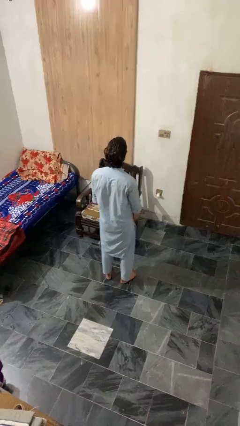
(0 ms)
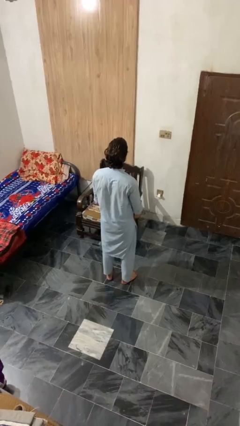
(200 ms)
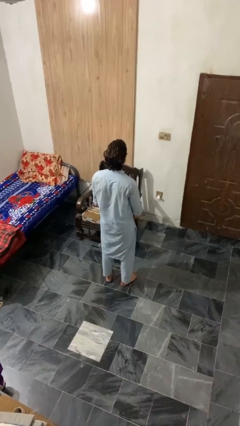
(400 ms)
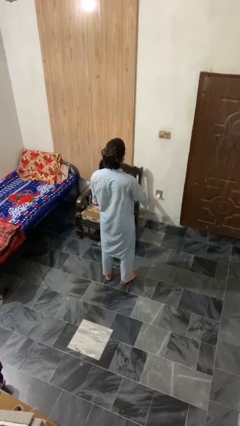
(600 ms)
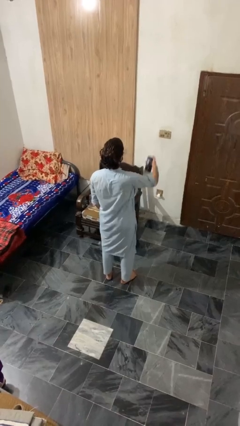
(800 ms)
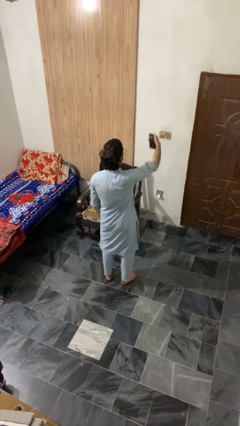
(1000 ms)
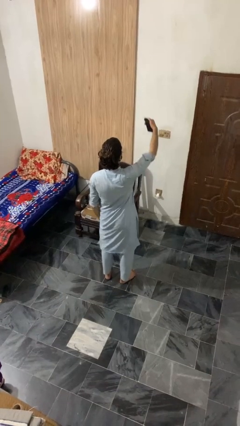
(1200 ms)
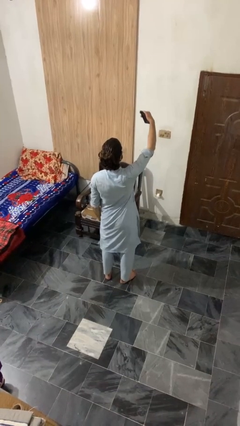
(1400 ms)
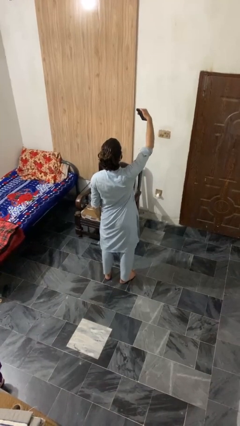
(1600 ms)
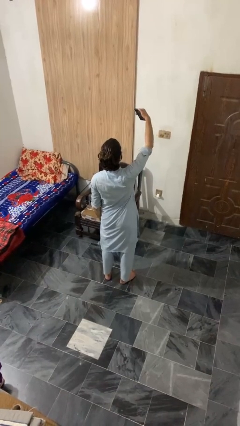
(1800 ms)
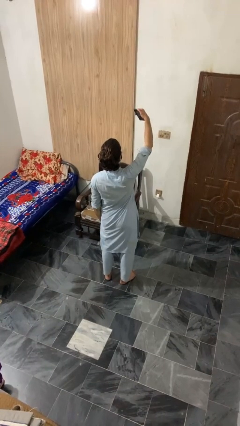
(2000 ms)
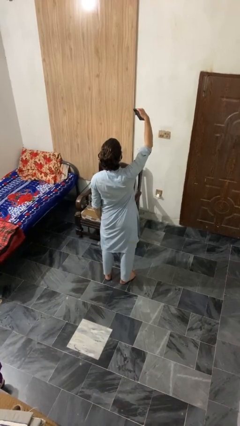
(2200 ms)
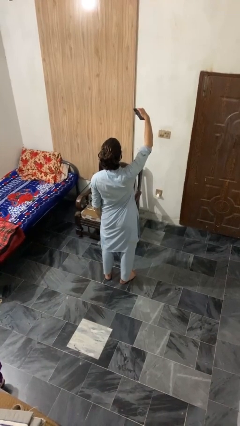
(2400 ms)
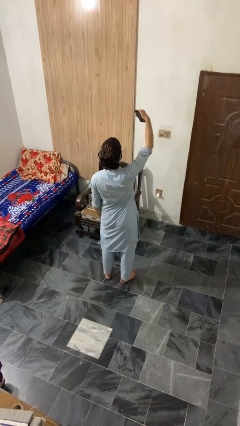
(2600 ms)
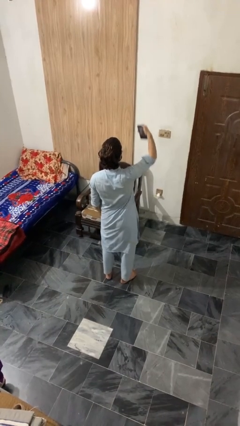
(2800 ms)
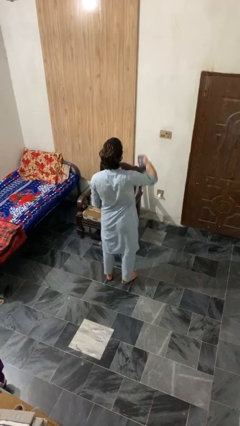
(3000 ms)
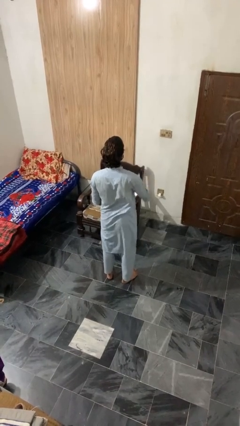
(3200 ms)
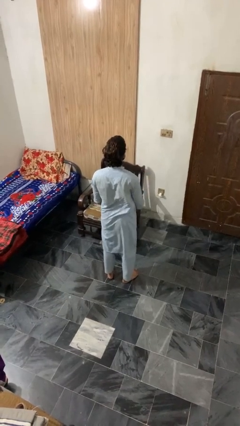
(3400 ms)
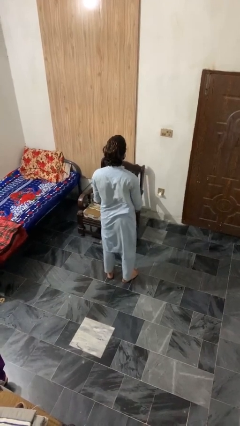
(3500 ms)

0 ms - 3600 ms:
person takes selfie

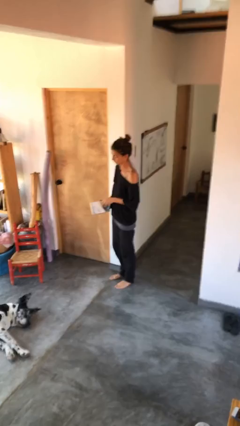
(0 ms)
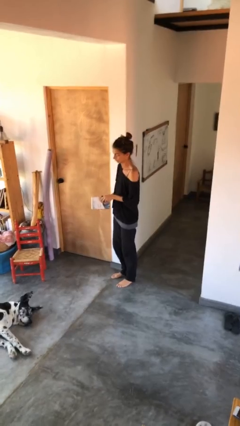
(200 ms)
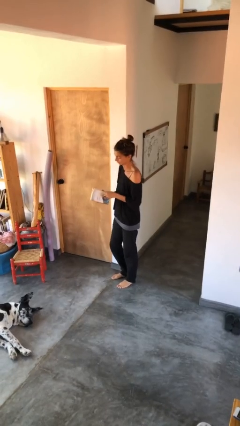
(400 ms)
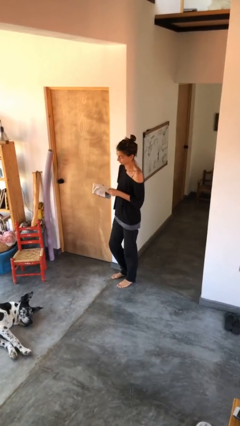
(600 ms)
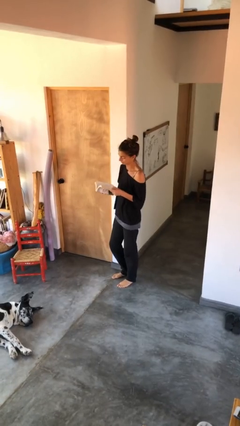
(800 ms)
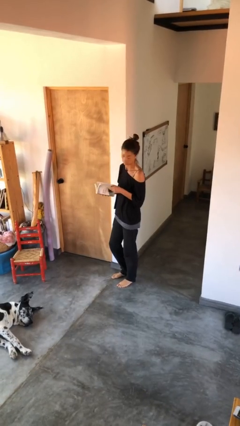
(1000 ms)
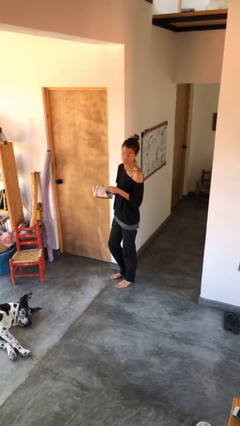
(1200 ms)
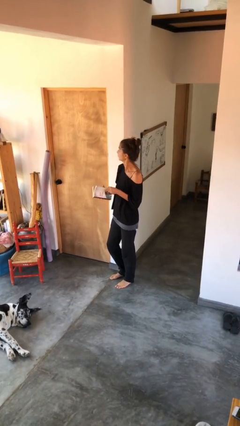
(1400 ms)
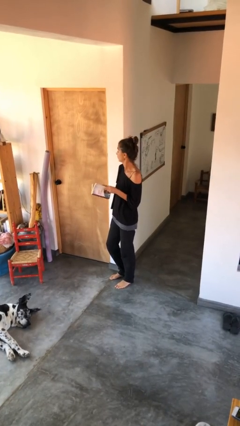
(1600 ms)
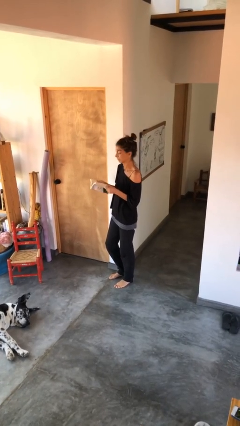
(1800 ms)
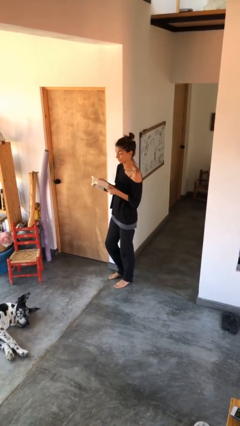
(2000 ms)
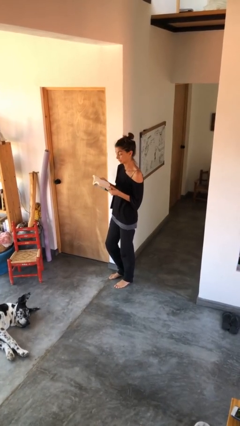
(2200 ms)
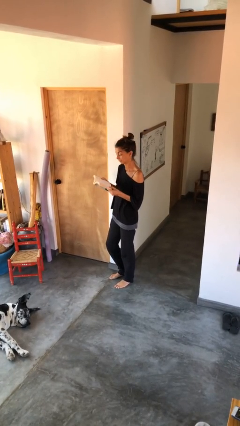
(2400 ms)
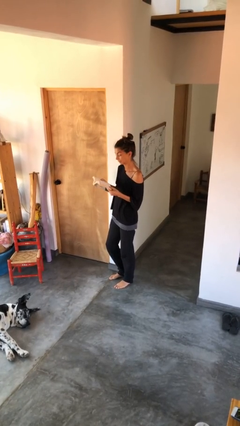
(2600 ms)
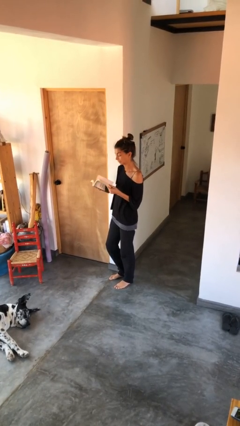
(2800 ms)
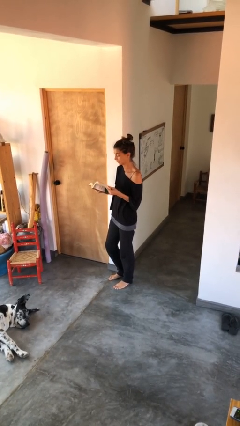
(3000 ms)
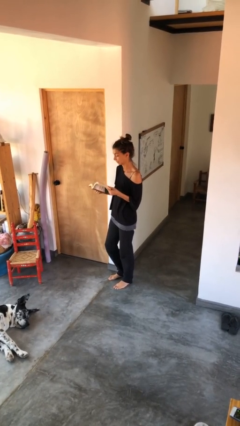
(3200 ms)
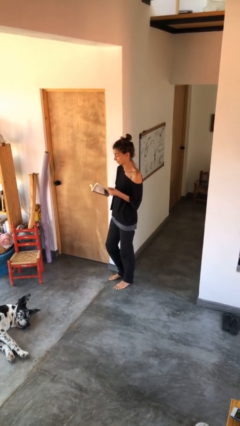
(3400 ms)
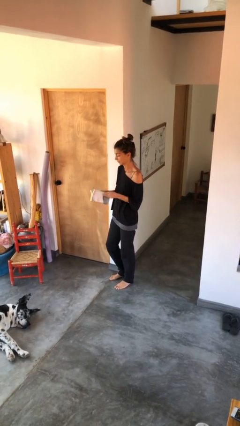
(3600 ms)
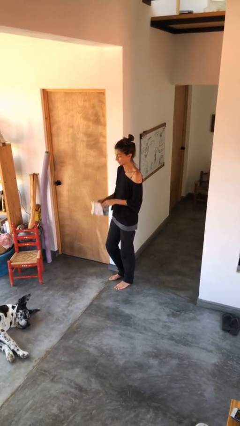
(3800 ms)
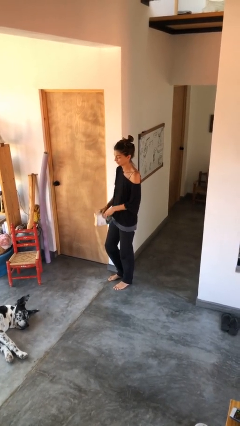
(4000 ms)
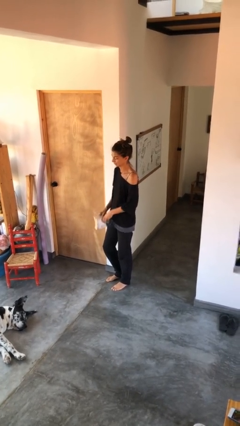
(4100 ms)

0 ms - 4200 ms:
person reads book

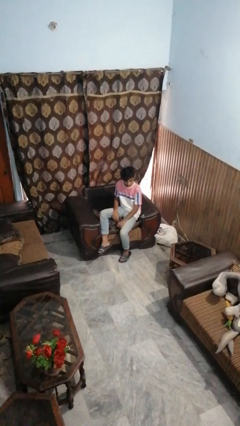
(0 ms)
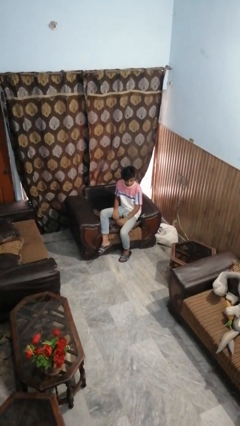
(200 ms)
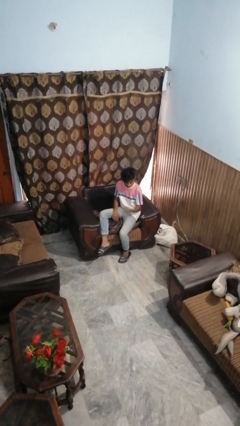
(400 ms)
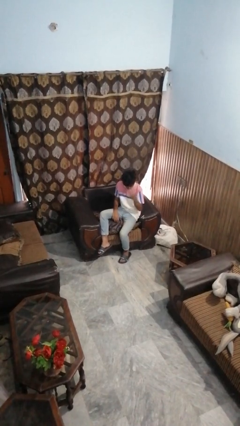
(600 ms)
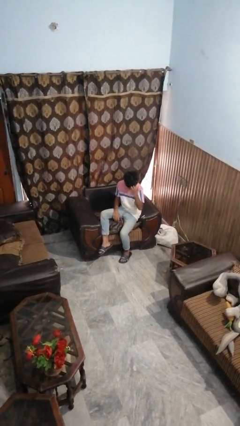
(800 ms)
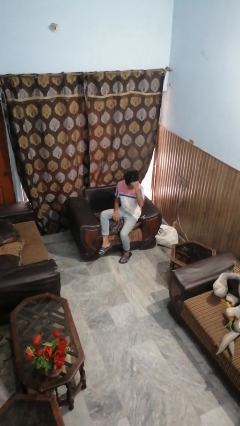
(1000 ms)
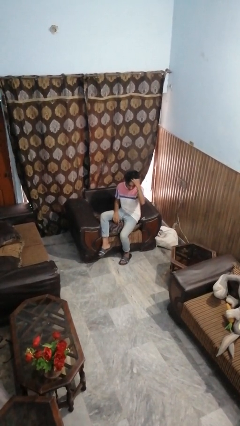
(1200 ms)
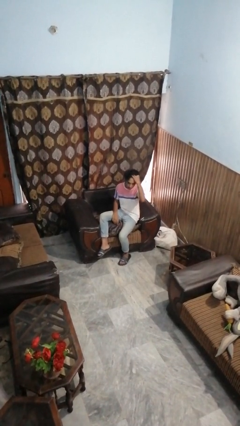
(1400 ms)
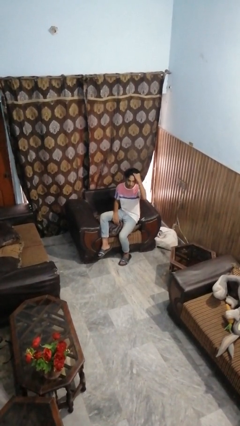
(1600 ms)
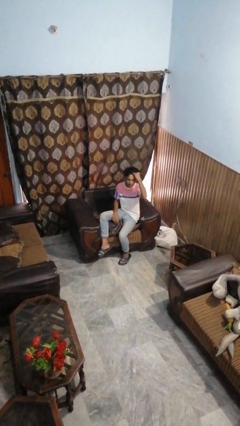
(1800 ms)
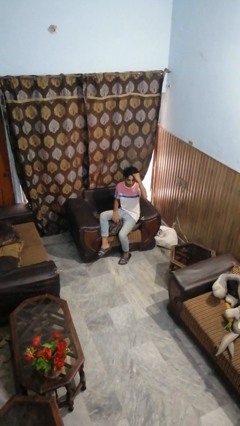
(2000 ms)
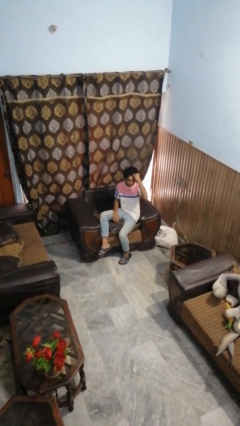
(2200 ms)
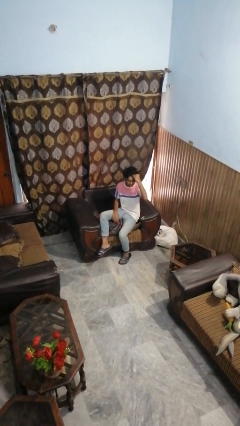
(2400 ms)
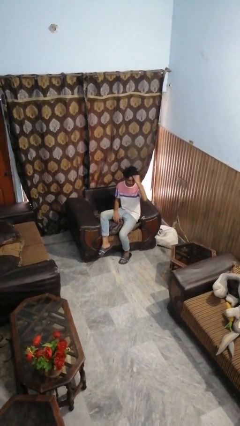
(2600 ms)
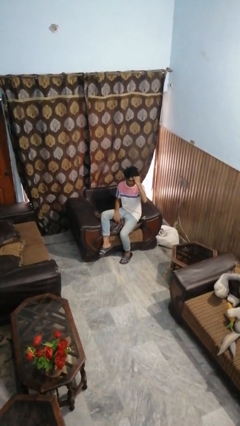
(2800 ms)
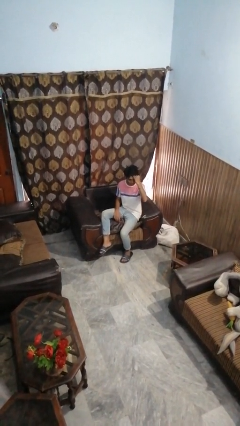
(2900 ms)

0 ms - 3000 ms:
person strokes hair

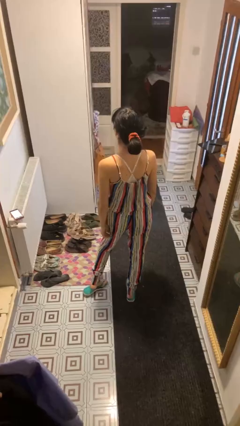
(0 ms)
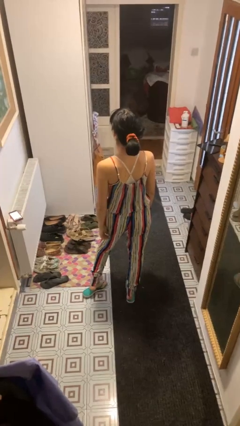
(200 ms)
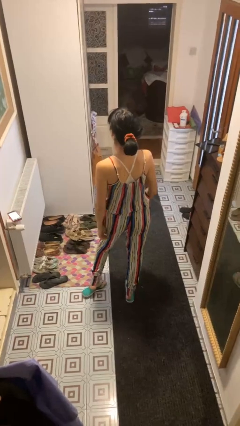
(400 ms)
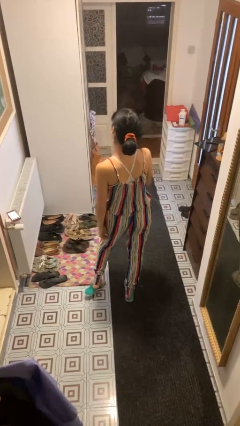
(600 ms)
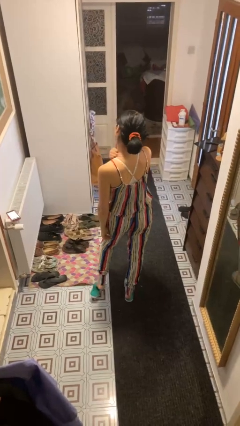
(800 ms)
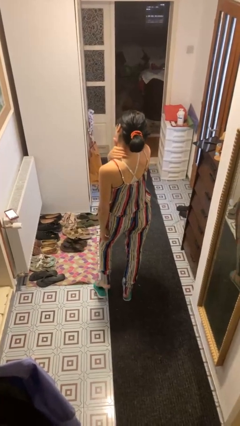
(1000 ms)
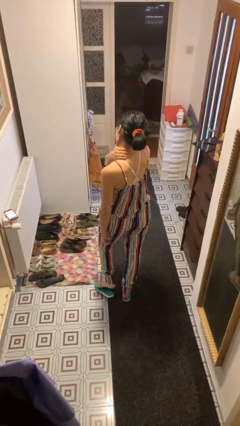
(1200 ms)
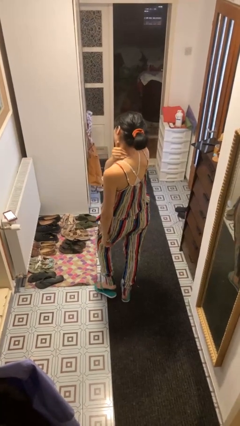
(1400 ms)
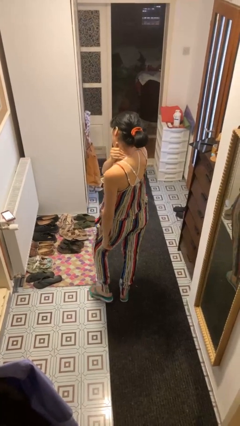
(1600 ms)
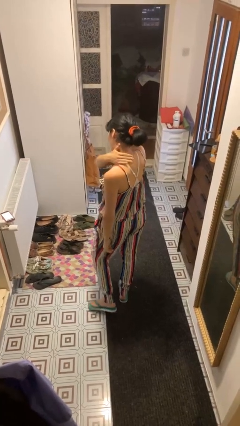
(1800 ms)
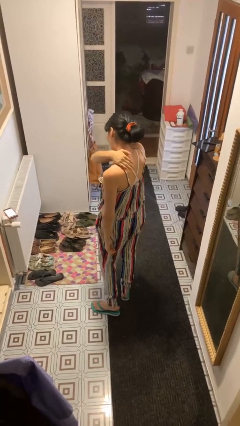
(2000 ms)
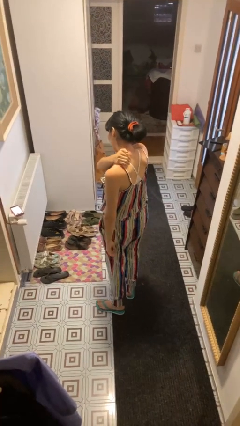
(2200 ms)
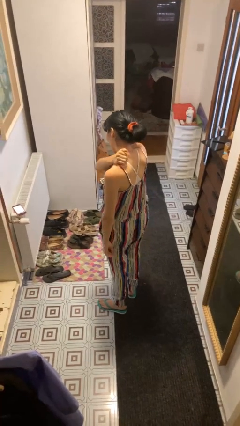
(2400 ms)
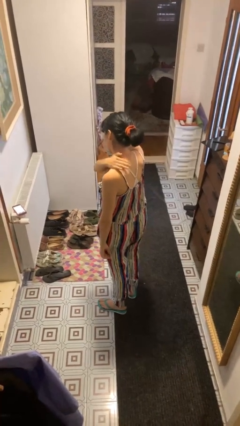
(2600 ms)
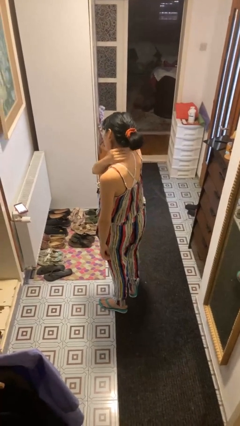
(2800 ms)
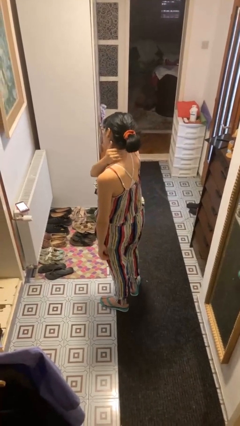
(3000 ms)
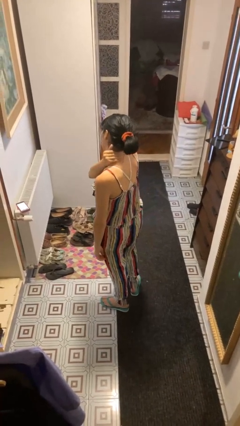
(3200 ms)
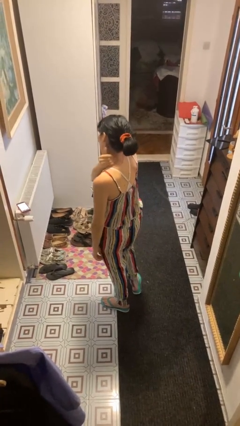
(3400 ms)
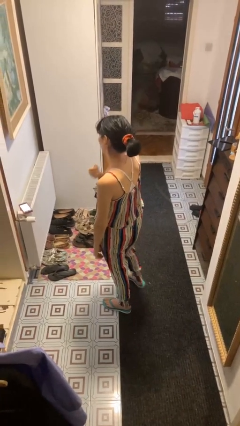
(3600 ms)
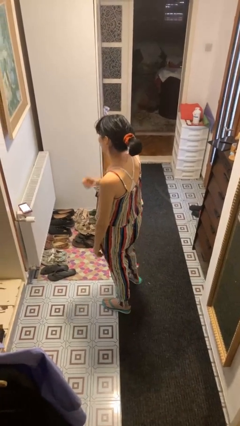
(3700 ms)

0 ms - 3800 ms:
person rubs neck

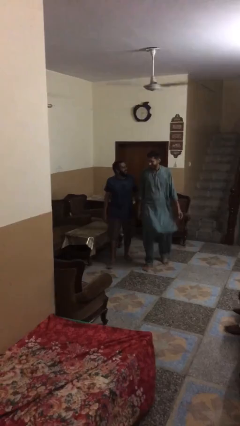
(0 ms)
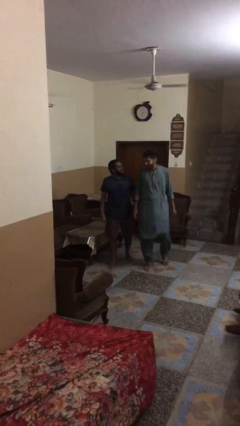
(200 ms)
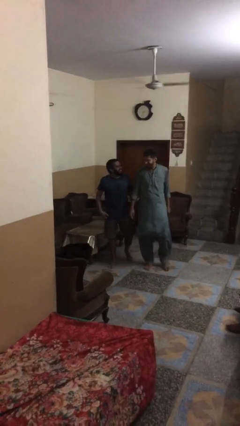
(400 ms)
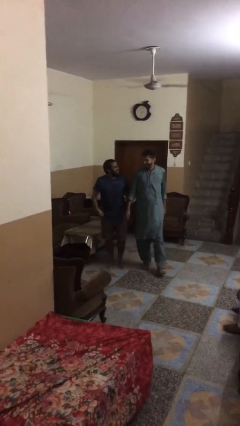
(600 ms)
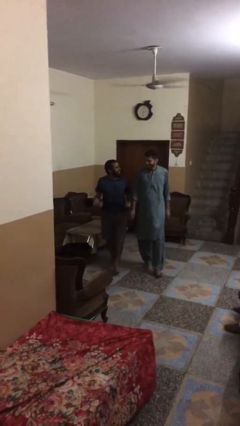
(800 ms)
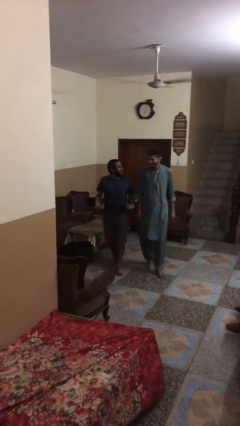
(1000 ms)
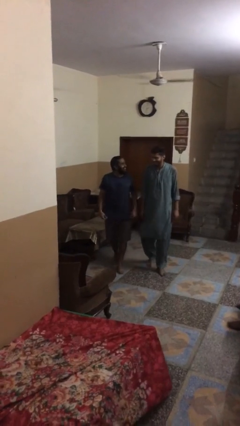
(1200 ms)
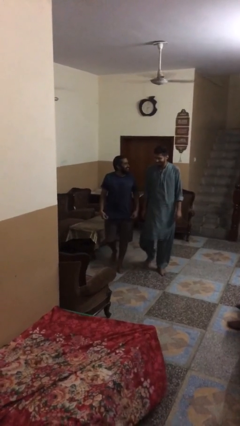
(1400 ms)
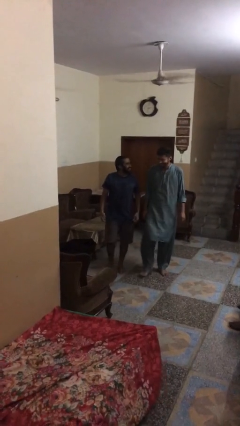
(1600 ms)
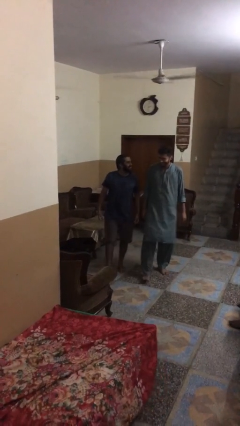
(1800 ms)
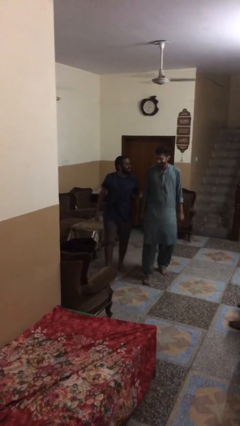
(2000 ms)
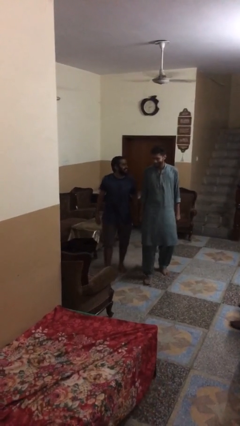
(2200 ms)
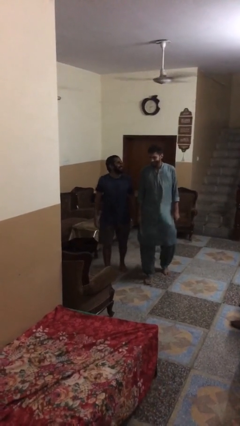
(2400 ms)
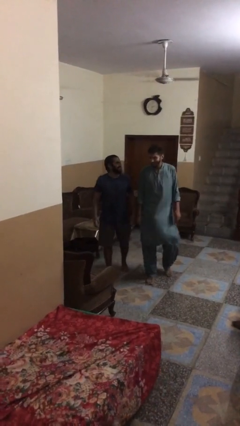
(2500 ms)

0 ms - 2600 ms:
person talks to person

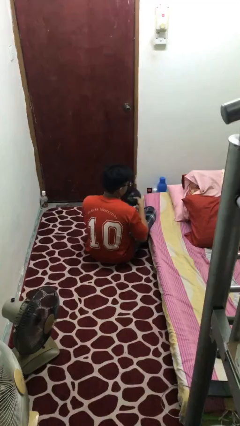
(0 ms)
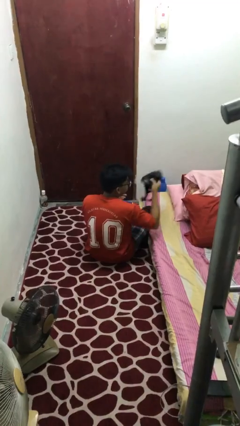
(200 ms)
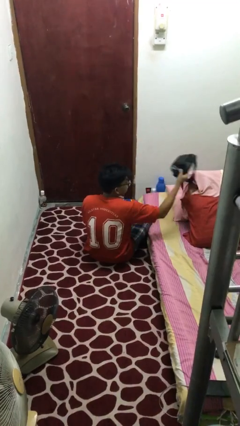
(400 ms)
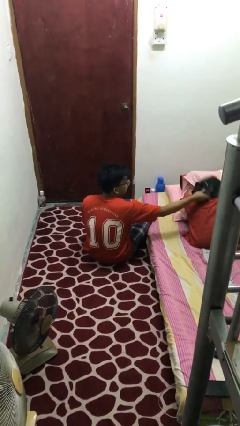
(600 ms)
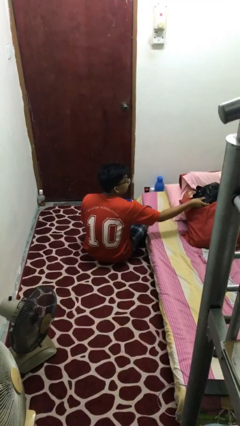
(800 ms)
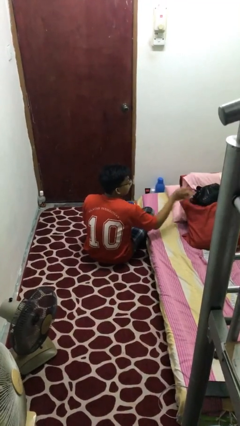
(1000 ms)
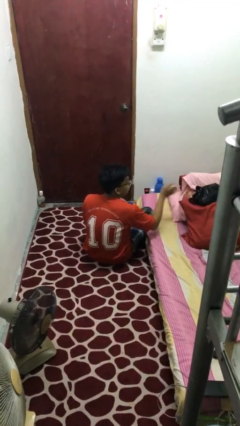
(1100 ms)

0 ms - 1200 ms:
person puts down object on bed
